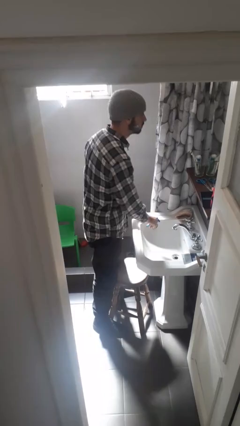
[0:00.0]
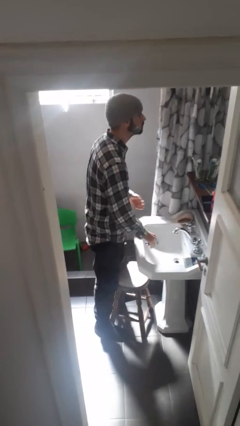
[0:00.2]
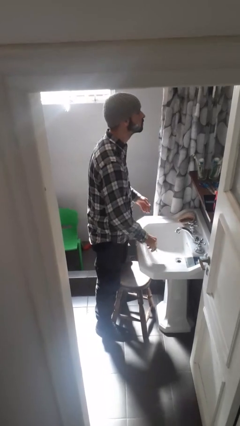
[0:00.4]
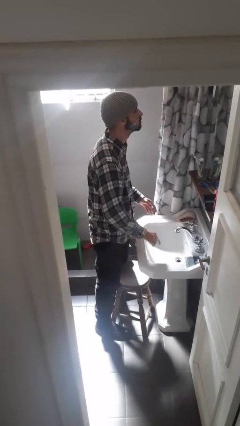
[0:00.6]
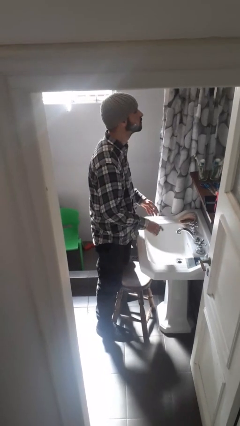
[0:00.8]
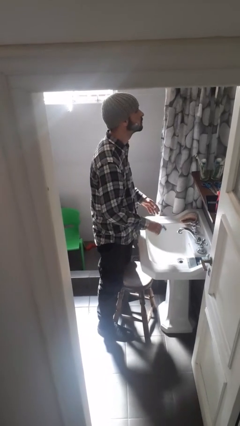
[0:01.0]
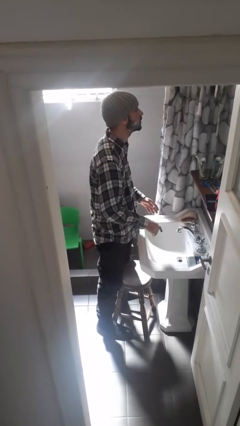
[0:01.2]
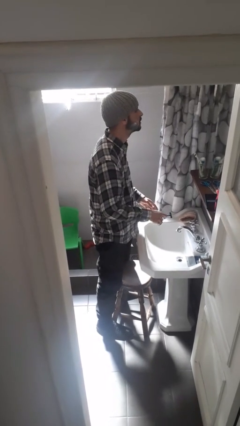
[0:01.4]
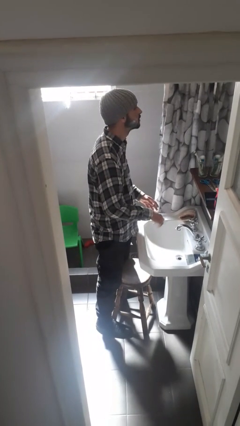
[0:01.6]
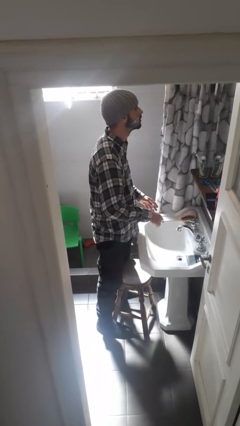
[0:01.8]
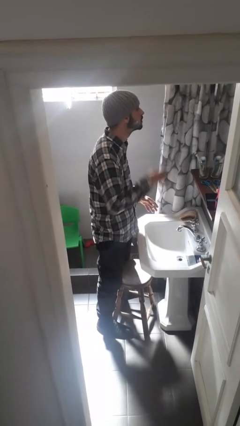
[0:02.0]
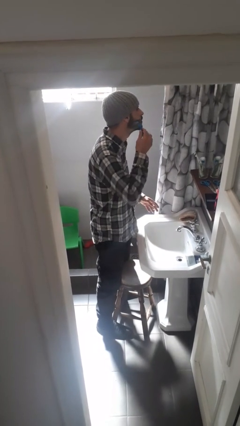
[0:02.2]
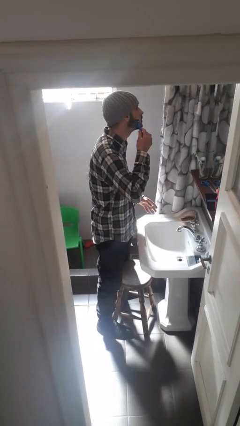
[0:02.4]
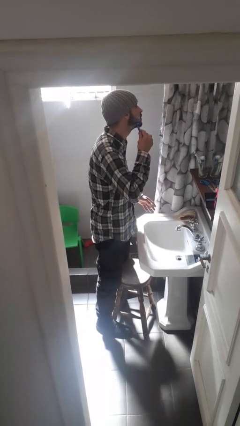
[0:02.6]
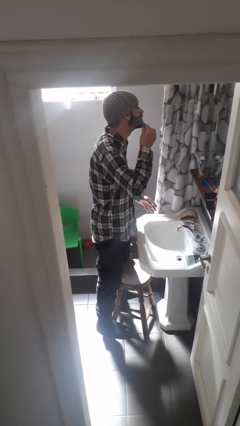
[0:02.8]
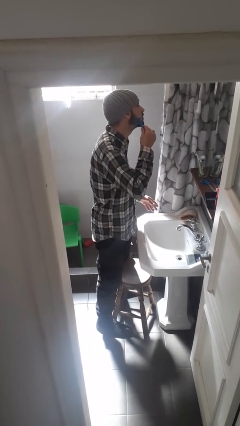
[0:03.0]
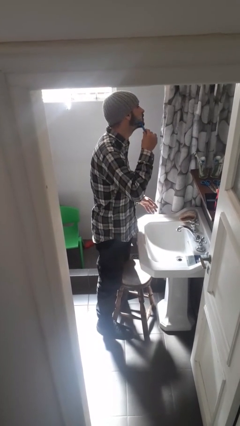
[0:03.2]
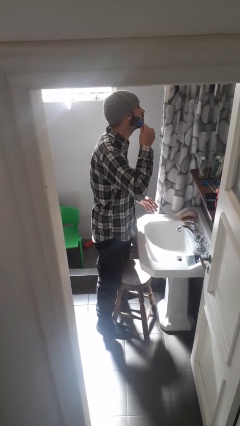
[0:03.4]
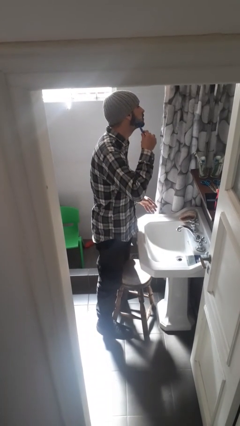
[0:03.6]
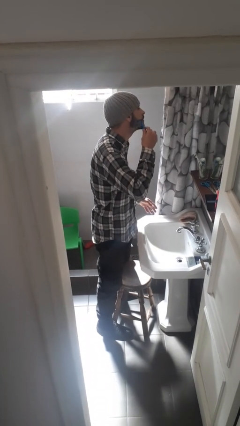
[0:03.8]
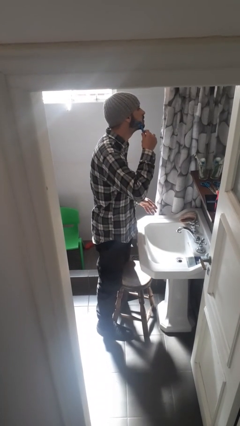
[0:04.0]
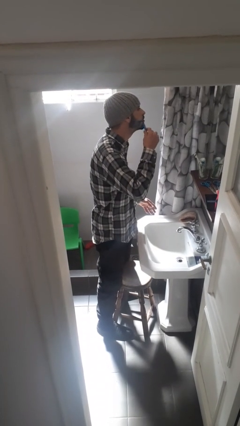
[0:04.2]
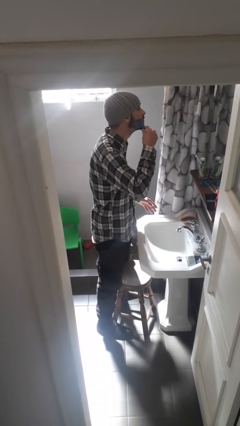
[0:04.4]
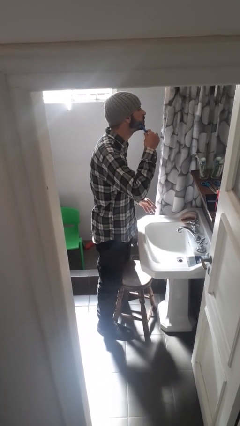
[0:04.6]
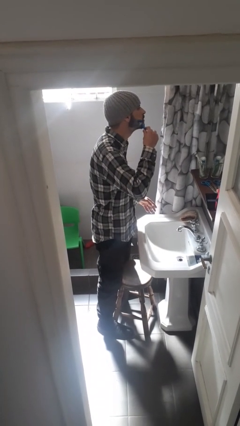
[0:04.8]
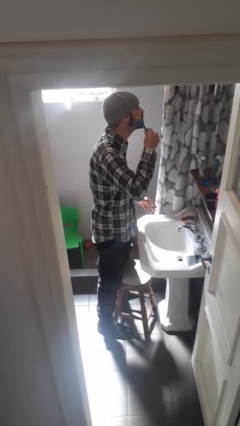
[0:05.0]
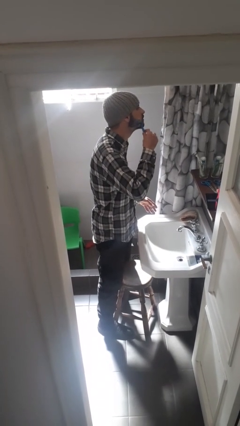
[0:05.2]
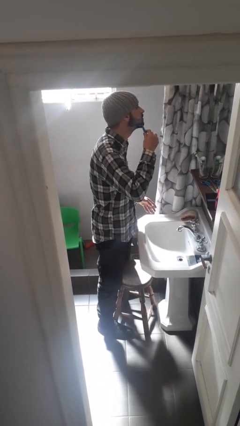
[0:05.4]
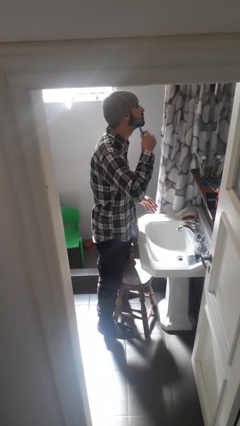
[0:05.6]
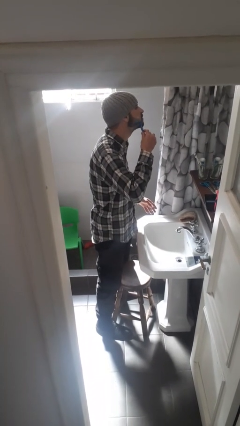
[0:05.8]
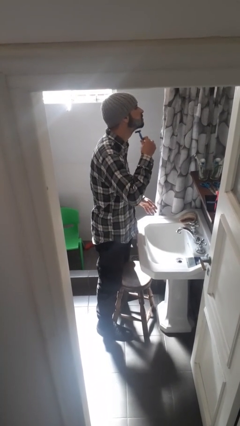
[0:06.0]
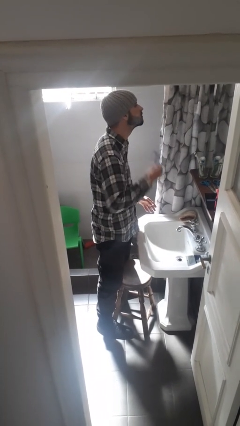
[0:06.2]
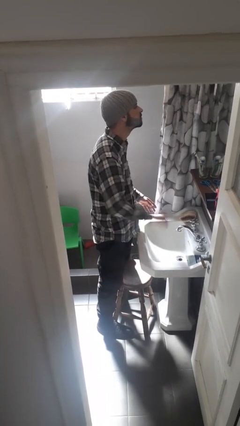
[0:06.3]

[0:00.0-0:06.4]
person shaves face

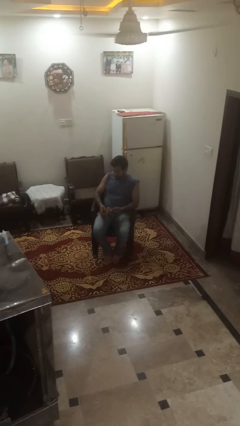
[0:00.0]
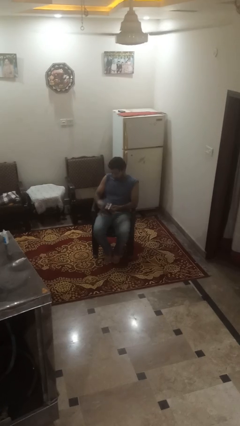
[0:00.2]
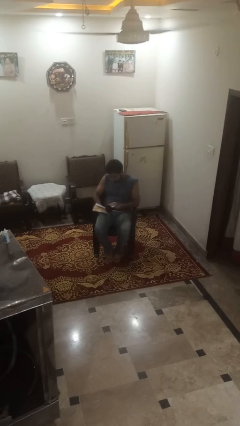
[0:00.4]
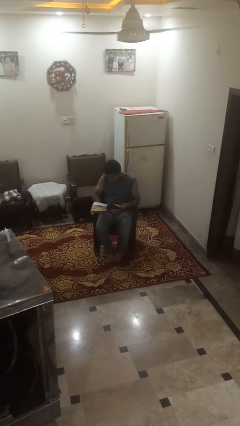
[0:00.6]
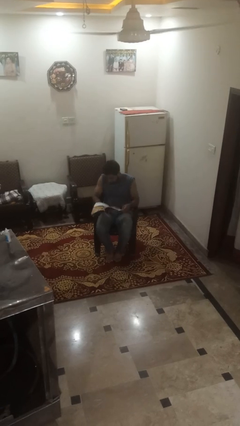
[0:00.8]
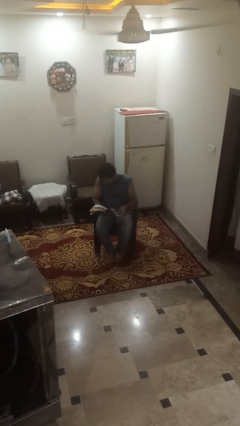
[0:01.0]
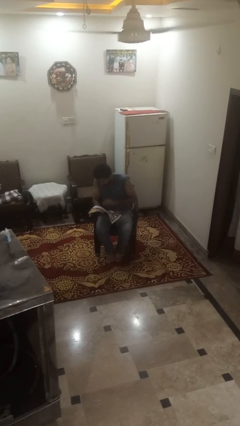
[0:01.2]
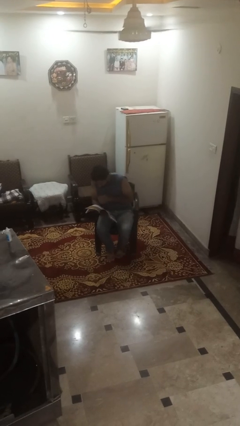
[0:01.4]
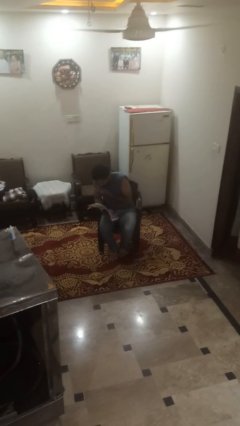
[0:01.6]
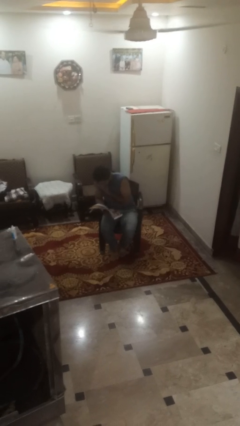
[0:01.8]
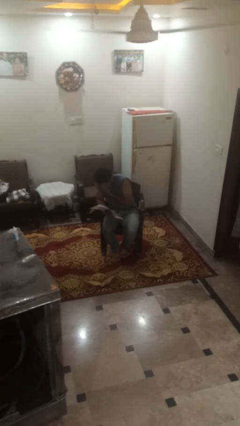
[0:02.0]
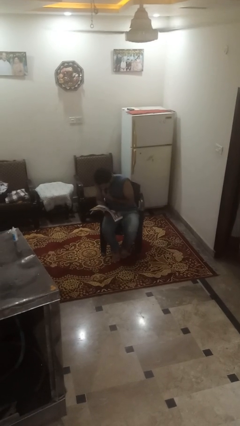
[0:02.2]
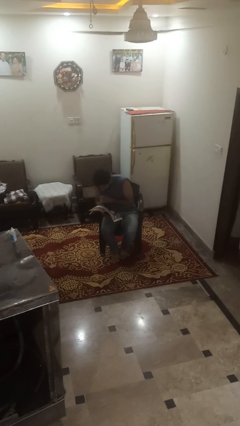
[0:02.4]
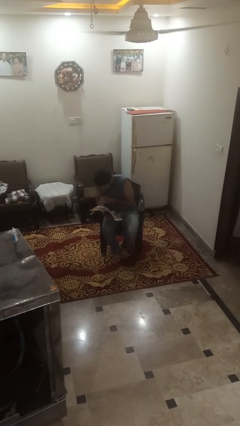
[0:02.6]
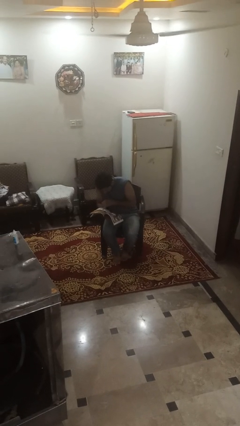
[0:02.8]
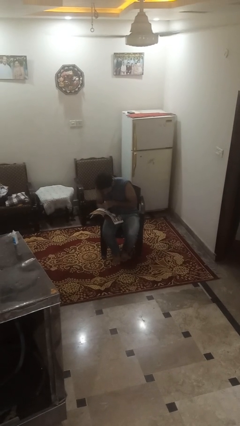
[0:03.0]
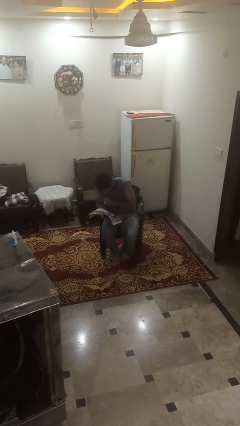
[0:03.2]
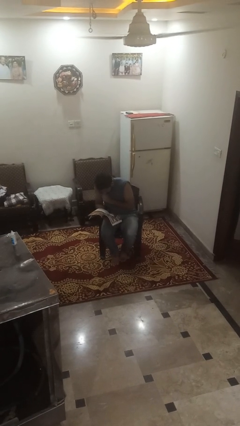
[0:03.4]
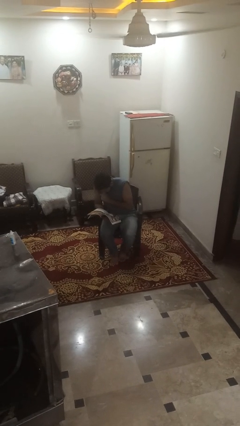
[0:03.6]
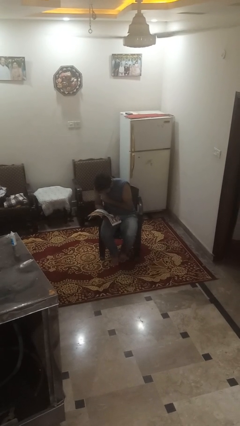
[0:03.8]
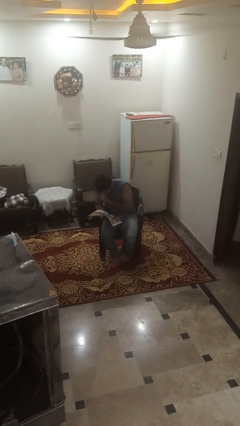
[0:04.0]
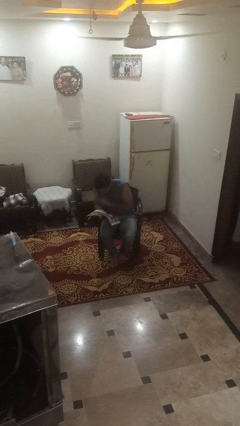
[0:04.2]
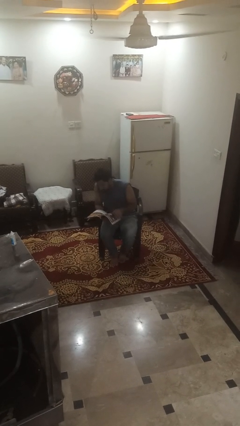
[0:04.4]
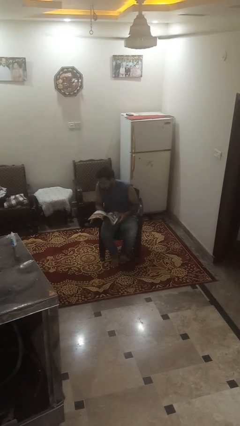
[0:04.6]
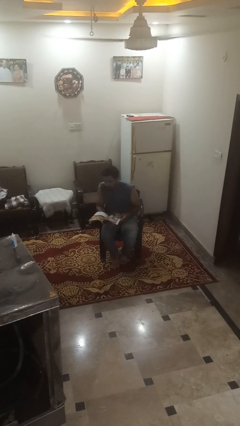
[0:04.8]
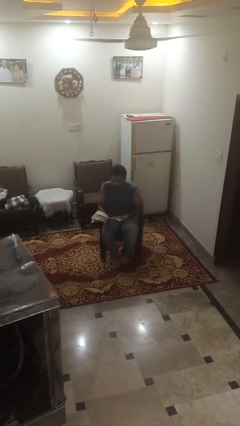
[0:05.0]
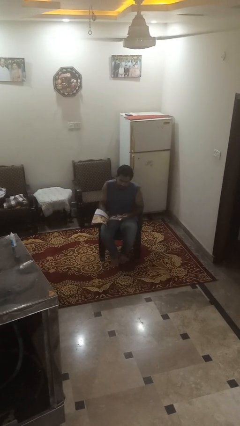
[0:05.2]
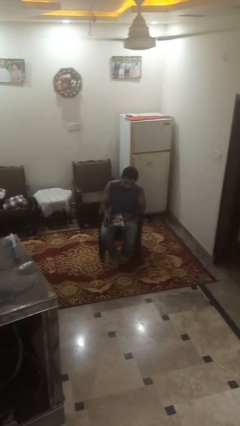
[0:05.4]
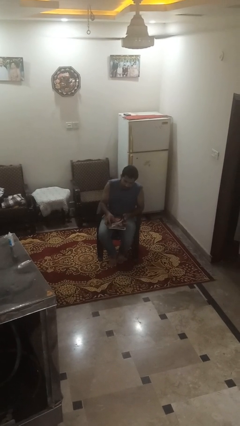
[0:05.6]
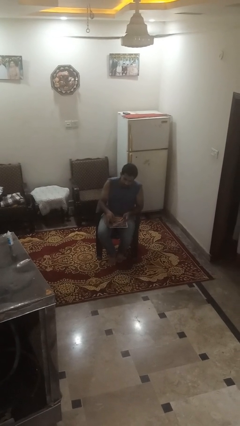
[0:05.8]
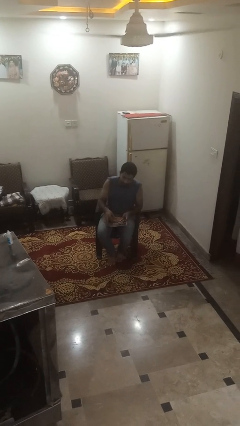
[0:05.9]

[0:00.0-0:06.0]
person reads magazine

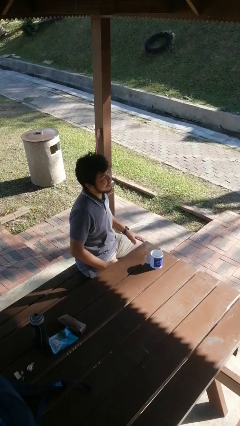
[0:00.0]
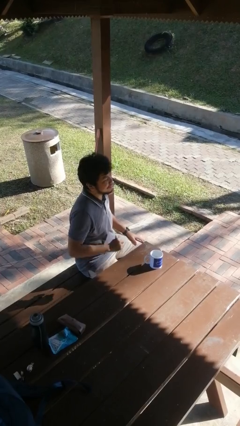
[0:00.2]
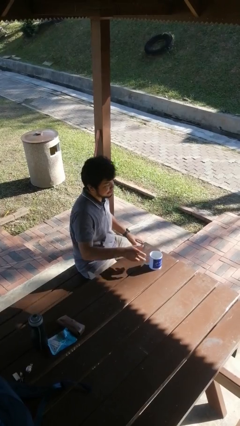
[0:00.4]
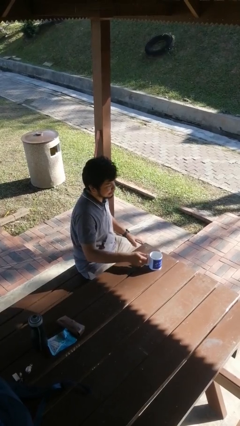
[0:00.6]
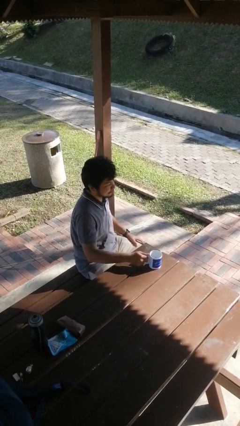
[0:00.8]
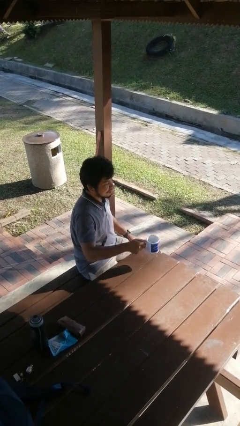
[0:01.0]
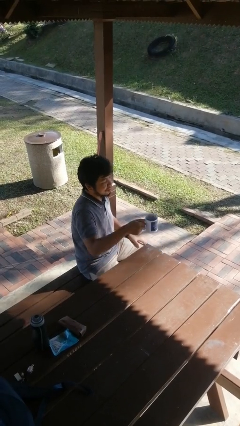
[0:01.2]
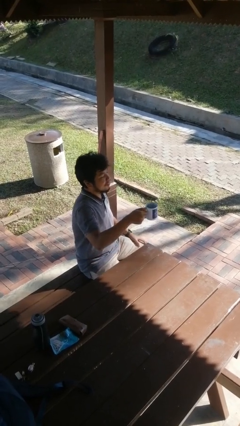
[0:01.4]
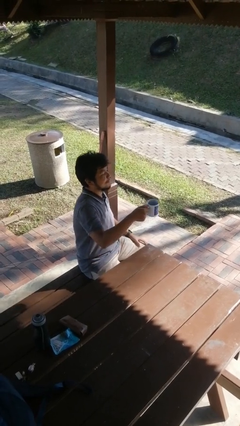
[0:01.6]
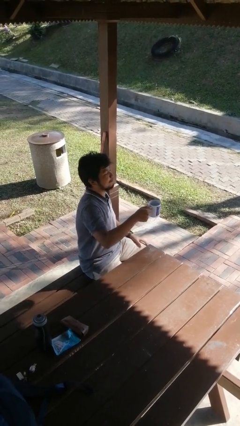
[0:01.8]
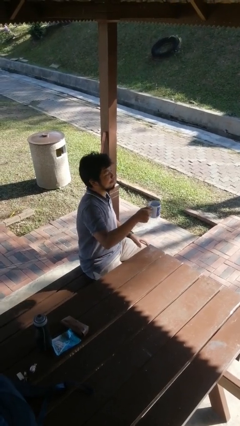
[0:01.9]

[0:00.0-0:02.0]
person picks up object from table

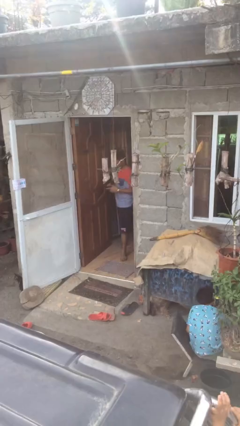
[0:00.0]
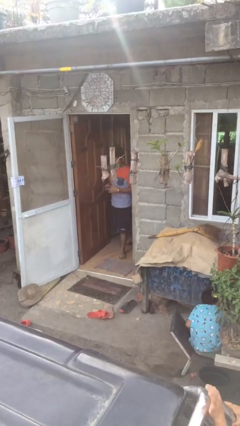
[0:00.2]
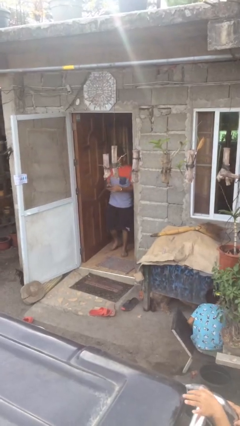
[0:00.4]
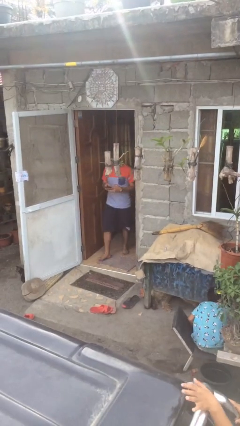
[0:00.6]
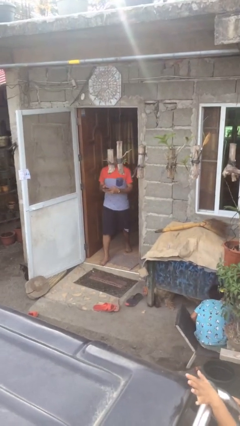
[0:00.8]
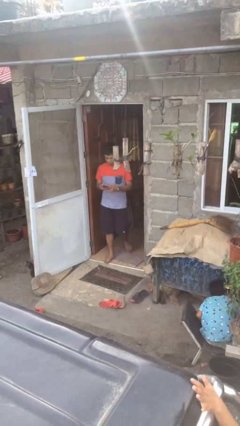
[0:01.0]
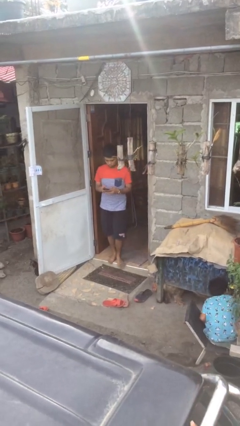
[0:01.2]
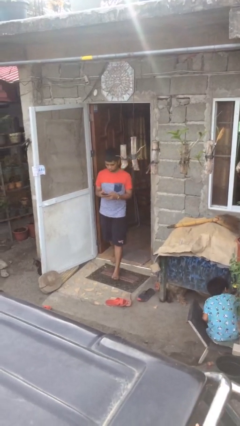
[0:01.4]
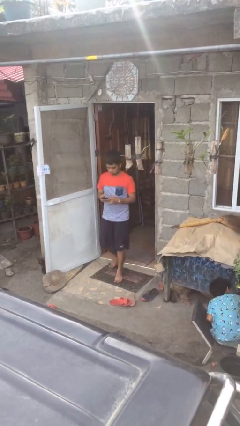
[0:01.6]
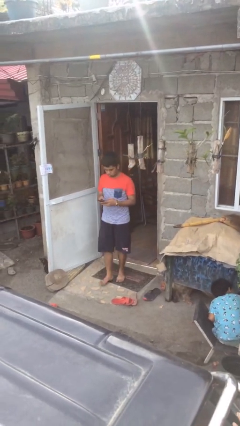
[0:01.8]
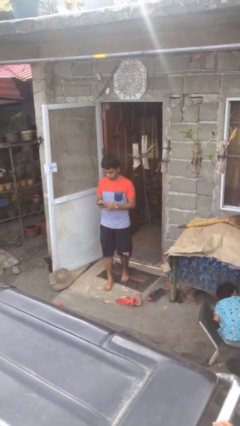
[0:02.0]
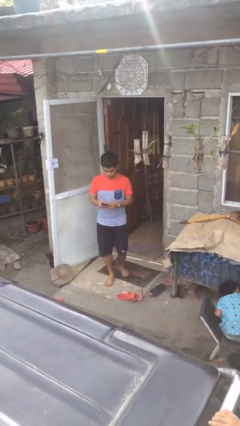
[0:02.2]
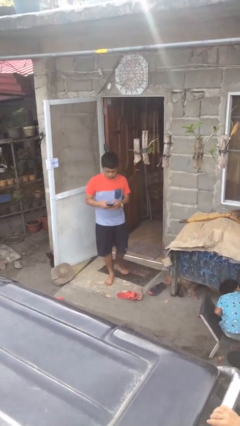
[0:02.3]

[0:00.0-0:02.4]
person enters scene through structure

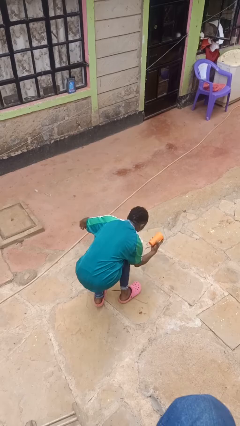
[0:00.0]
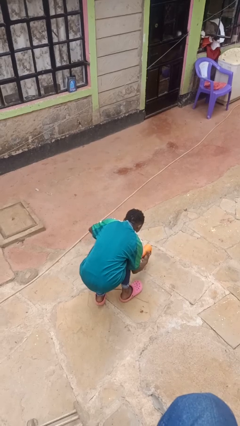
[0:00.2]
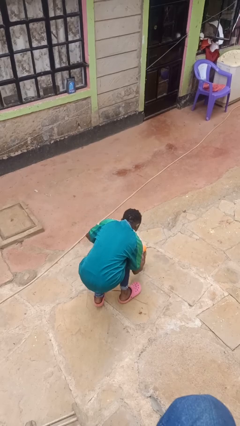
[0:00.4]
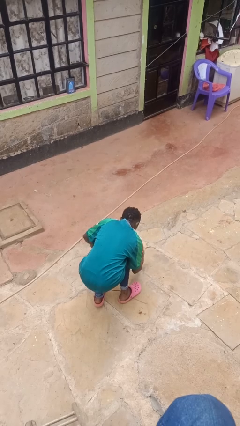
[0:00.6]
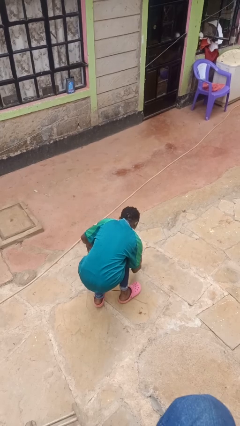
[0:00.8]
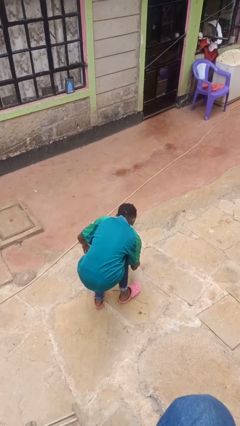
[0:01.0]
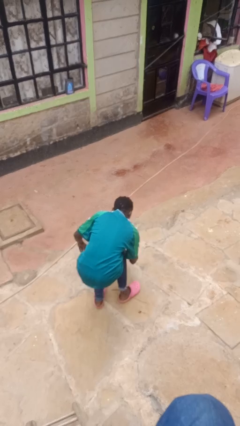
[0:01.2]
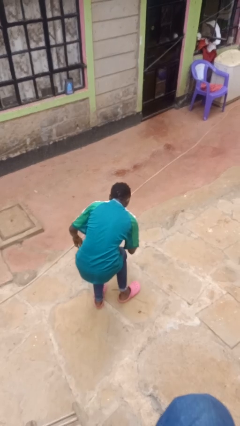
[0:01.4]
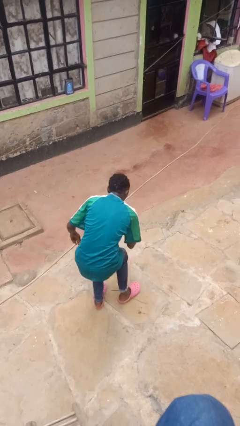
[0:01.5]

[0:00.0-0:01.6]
person catches dropped object
